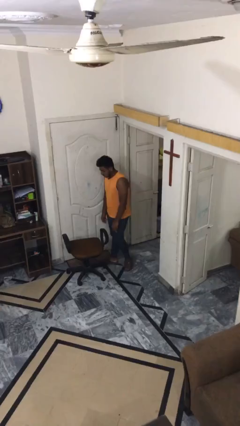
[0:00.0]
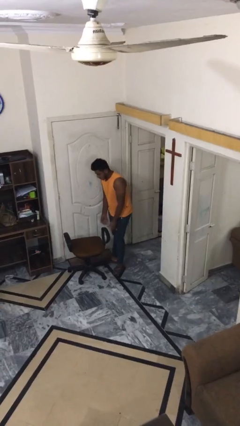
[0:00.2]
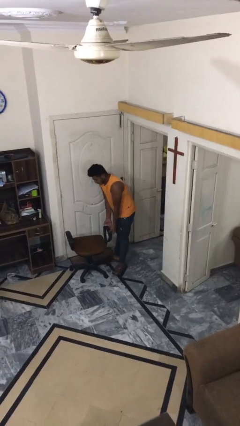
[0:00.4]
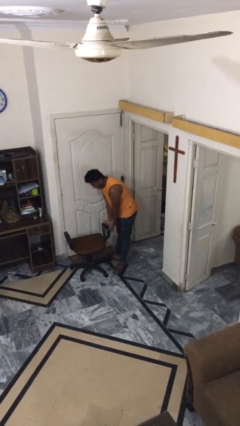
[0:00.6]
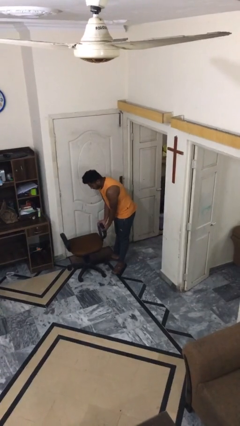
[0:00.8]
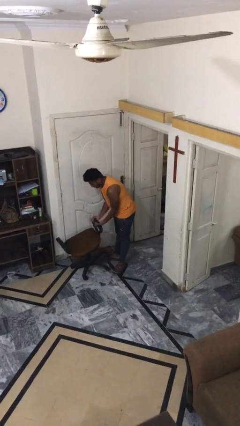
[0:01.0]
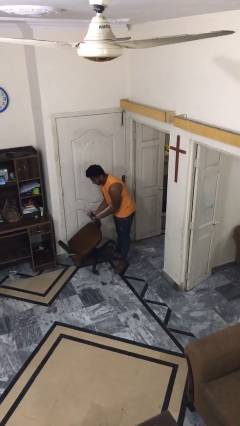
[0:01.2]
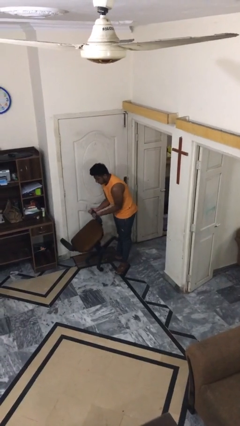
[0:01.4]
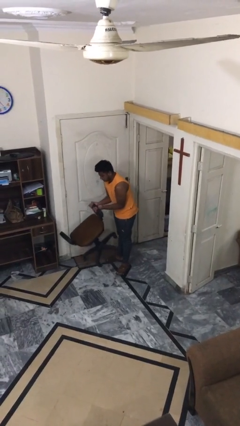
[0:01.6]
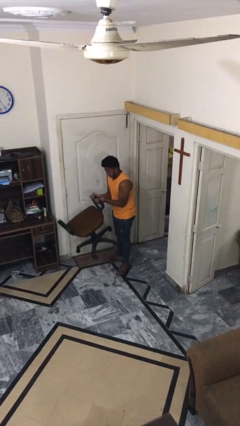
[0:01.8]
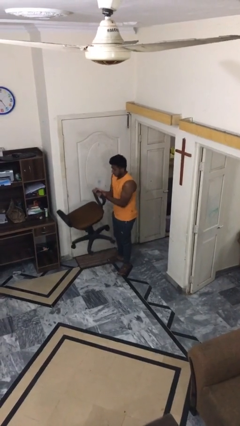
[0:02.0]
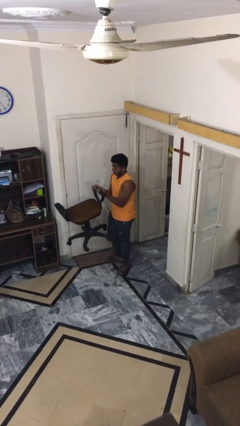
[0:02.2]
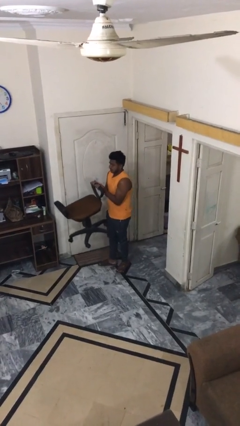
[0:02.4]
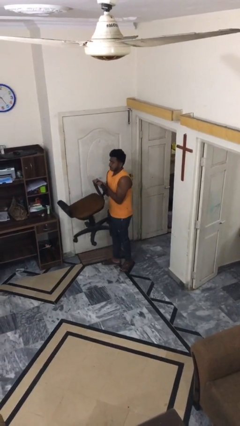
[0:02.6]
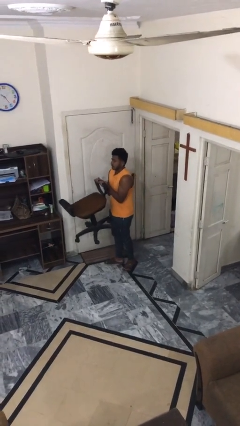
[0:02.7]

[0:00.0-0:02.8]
person picks up object from floor

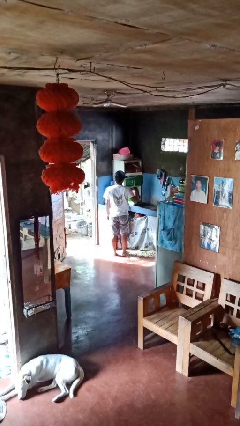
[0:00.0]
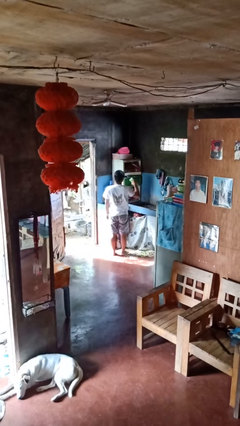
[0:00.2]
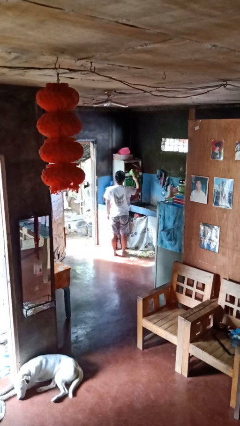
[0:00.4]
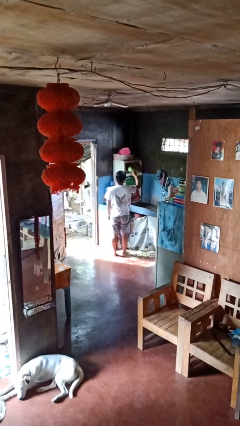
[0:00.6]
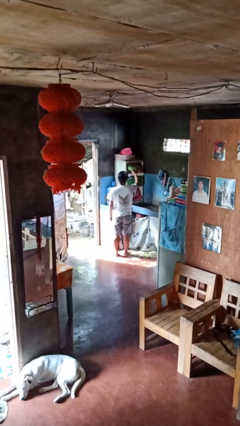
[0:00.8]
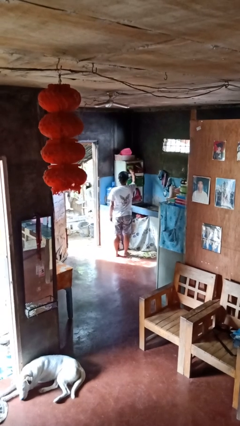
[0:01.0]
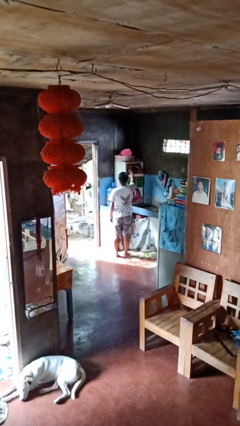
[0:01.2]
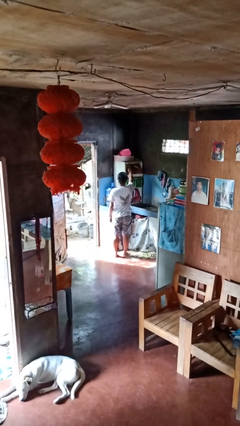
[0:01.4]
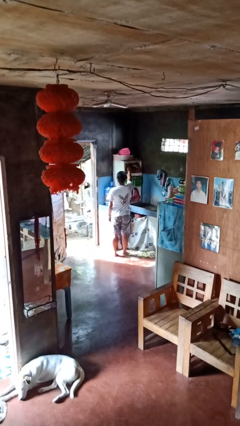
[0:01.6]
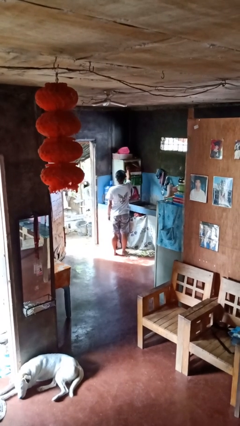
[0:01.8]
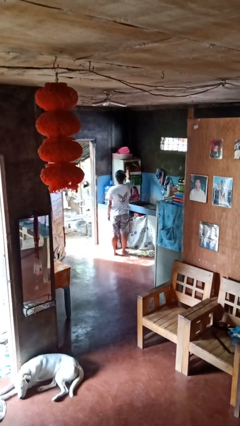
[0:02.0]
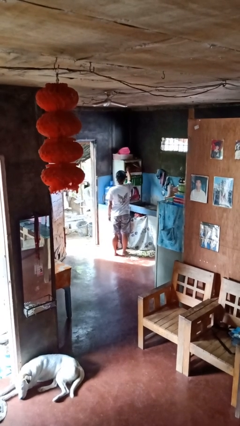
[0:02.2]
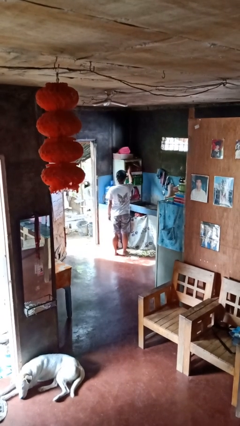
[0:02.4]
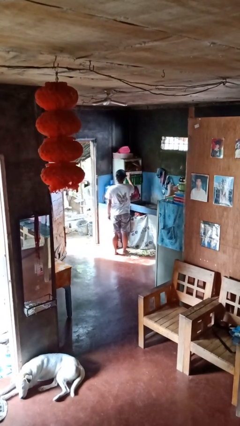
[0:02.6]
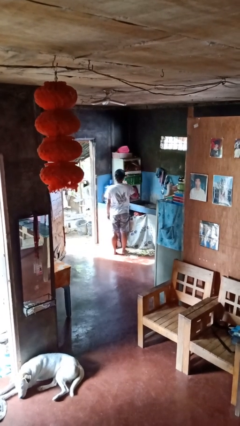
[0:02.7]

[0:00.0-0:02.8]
person puts object in cabinet

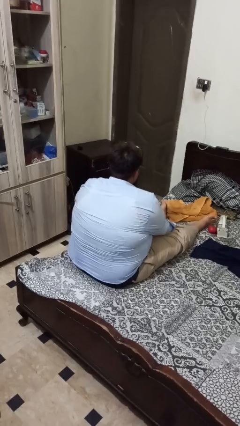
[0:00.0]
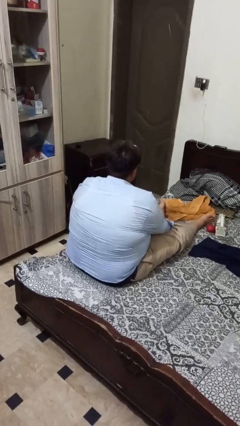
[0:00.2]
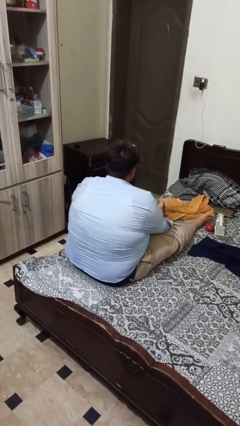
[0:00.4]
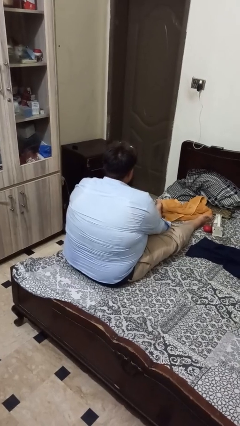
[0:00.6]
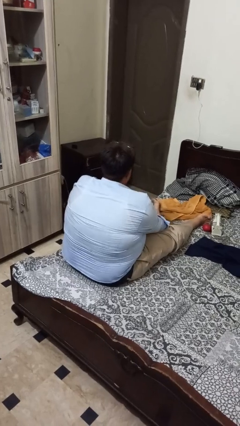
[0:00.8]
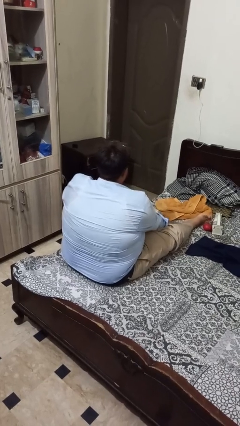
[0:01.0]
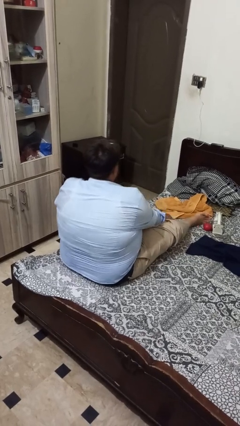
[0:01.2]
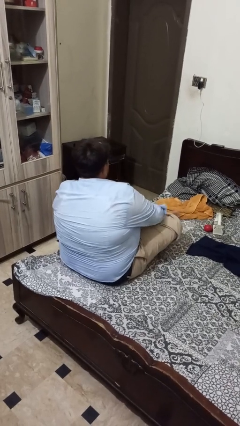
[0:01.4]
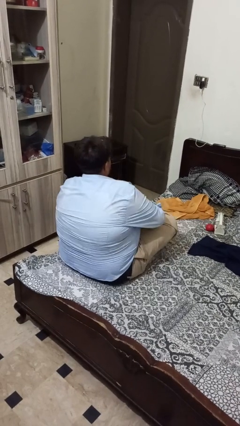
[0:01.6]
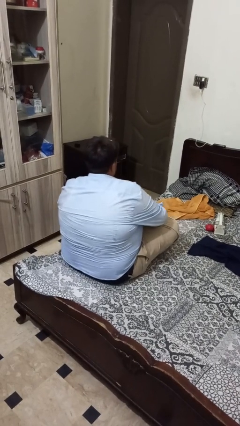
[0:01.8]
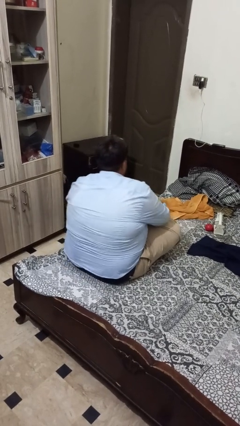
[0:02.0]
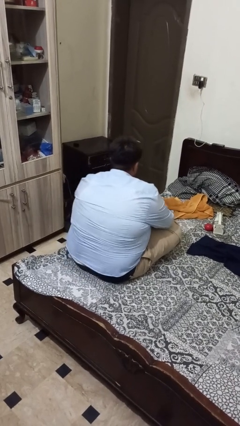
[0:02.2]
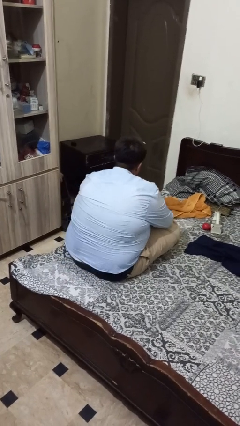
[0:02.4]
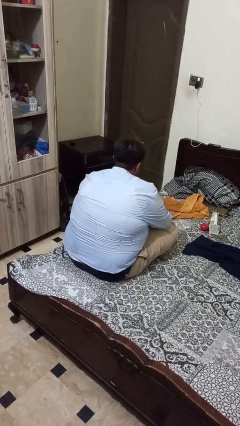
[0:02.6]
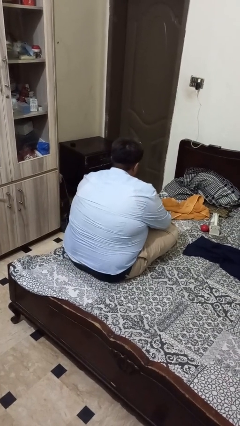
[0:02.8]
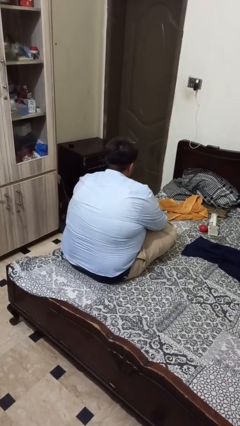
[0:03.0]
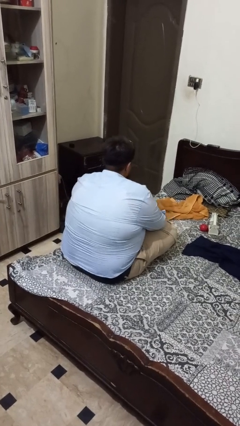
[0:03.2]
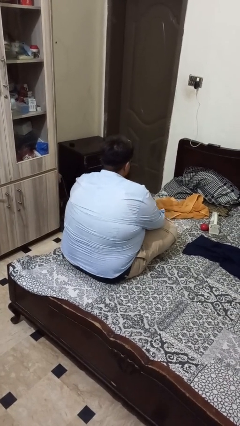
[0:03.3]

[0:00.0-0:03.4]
person crosses legs

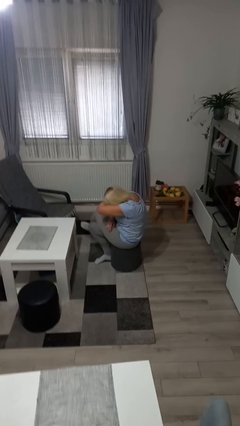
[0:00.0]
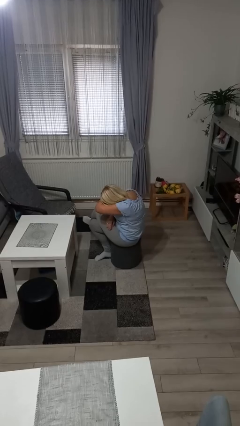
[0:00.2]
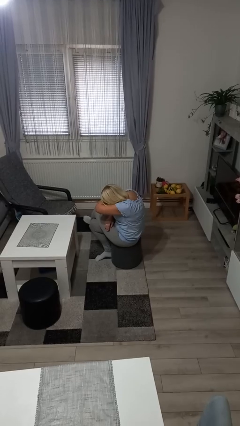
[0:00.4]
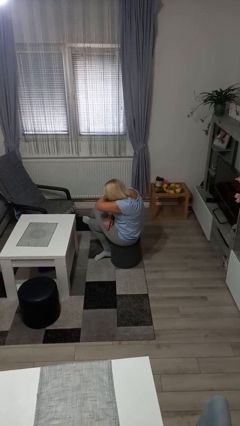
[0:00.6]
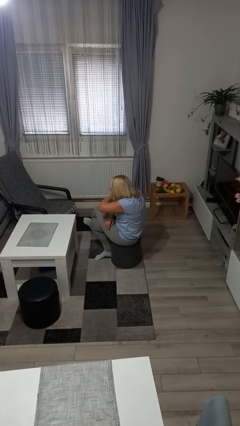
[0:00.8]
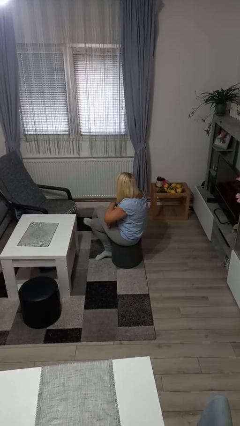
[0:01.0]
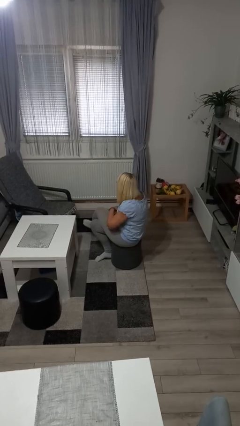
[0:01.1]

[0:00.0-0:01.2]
person sneezes into arm

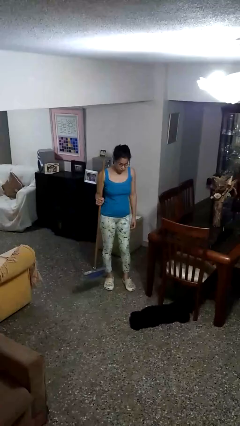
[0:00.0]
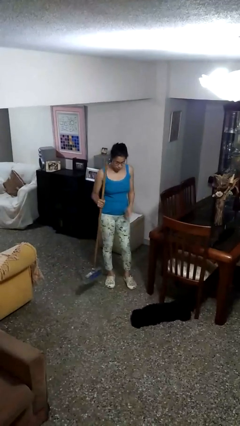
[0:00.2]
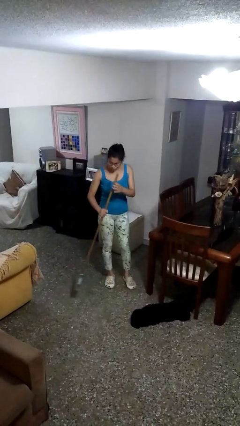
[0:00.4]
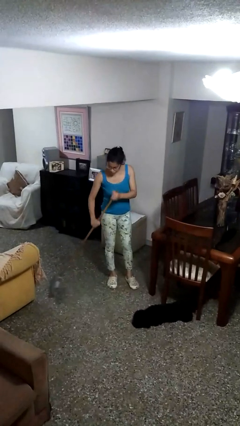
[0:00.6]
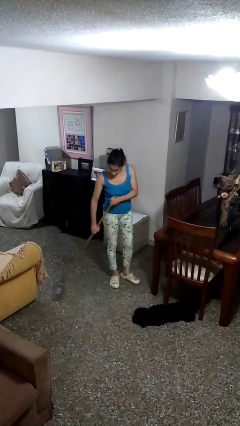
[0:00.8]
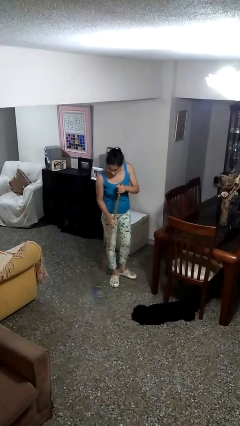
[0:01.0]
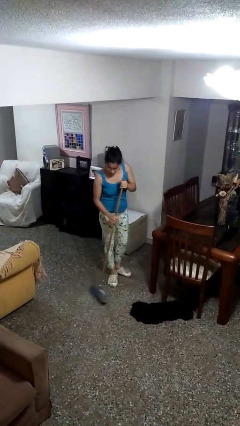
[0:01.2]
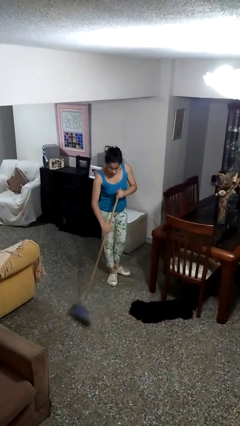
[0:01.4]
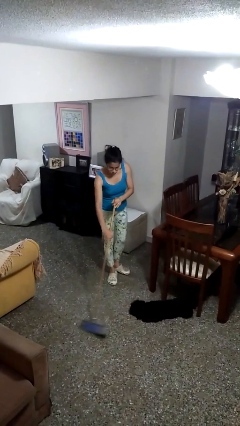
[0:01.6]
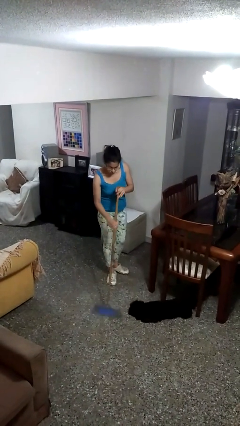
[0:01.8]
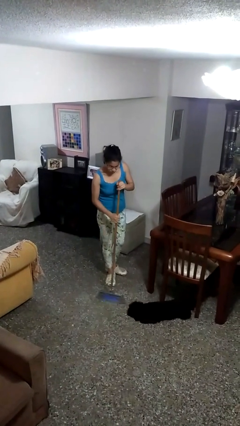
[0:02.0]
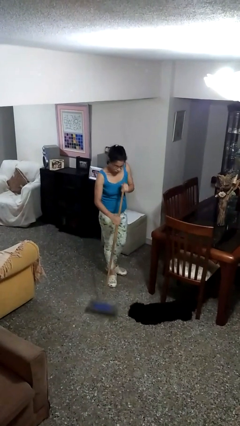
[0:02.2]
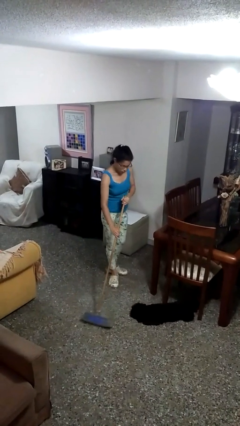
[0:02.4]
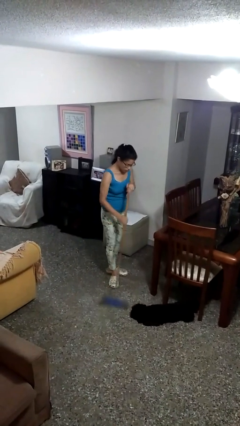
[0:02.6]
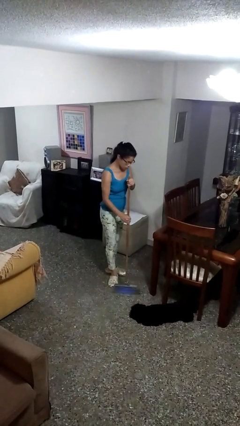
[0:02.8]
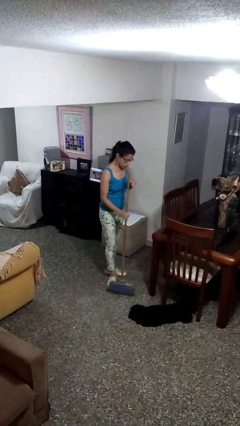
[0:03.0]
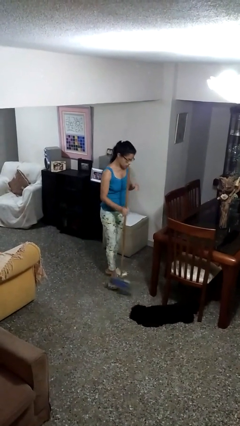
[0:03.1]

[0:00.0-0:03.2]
person sweeps floor

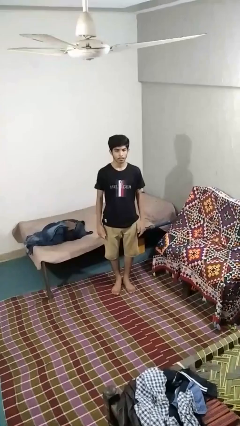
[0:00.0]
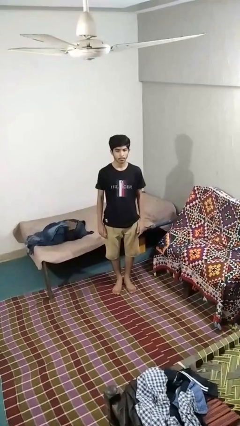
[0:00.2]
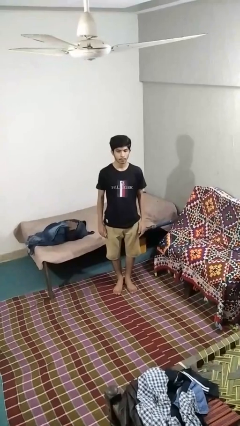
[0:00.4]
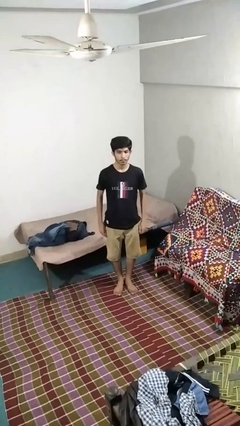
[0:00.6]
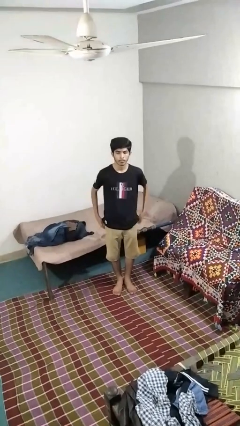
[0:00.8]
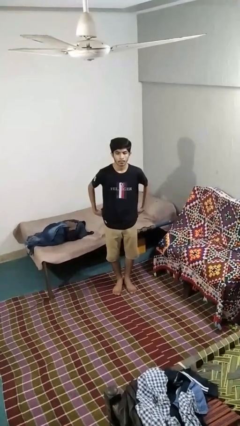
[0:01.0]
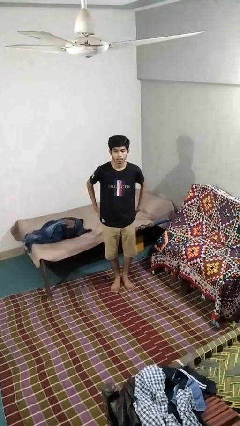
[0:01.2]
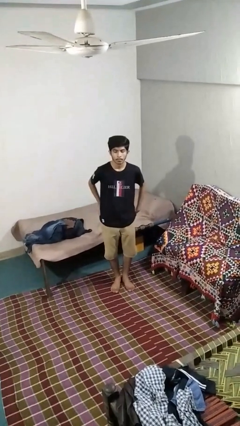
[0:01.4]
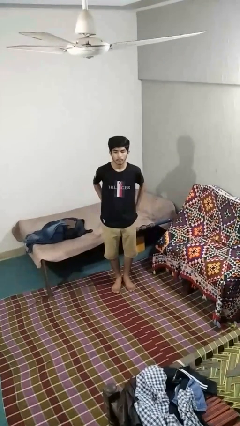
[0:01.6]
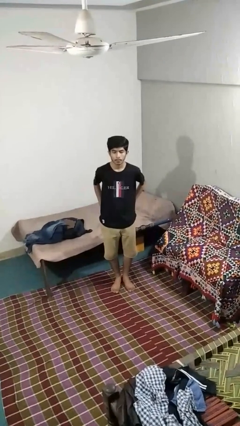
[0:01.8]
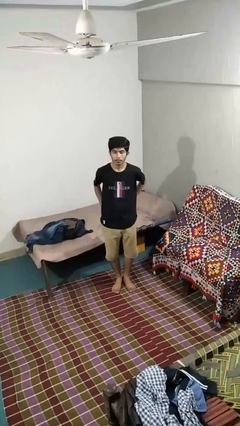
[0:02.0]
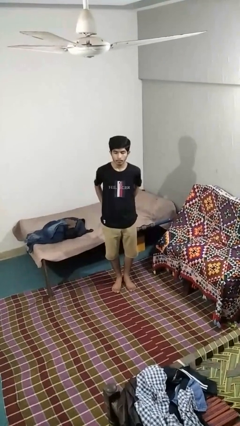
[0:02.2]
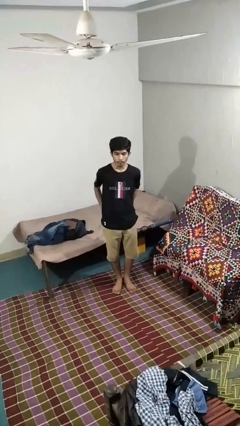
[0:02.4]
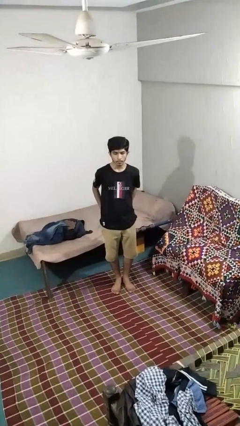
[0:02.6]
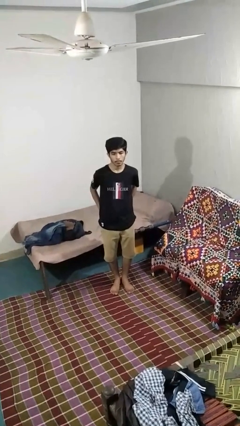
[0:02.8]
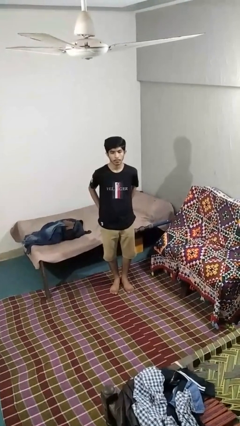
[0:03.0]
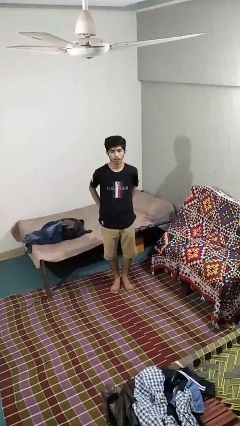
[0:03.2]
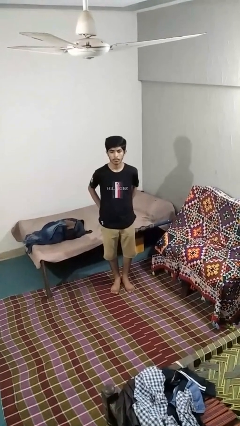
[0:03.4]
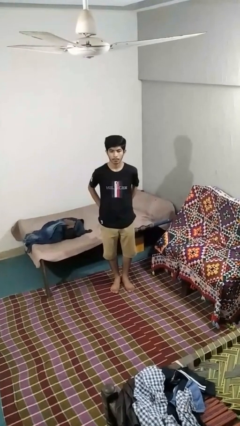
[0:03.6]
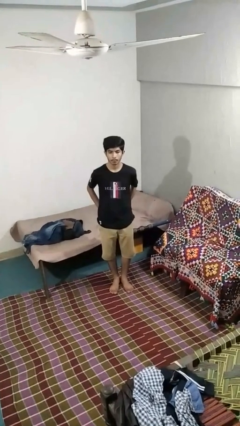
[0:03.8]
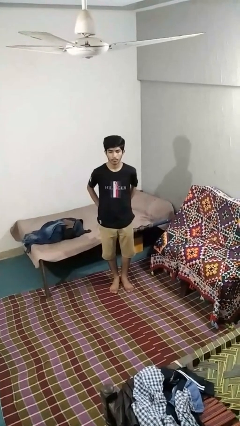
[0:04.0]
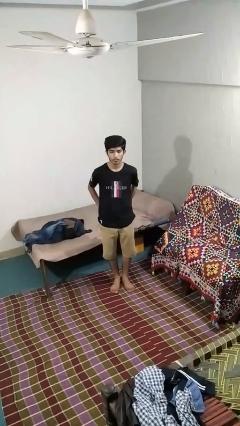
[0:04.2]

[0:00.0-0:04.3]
person puts hands in back pockets
